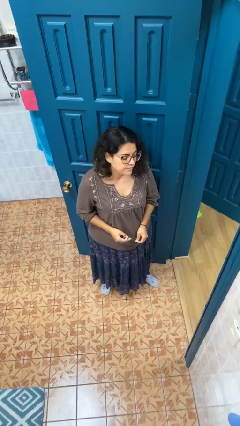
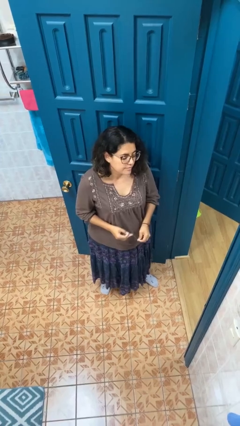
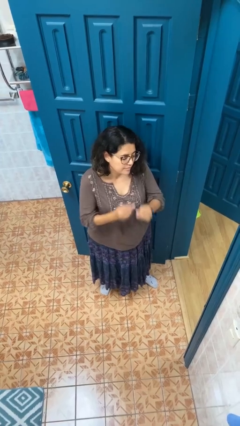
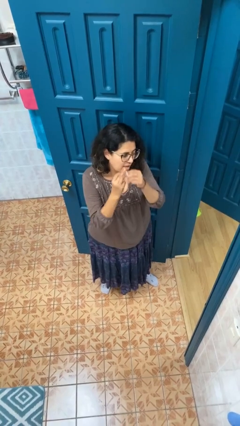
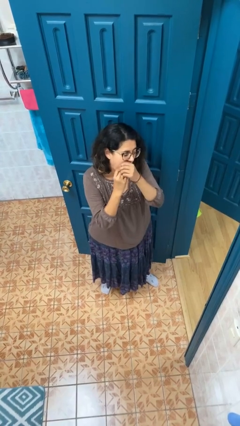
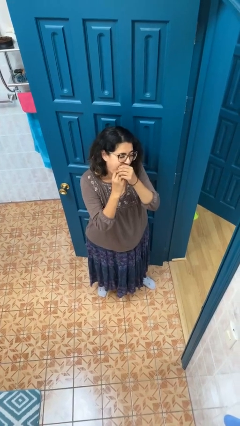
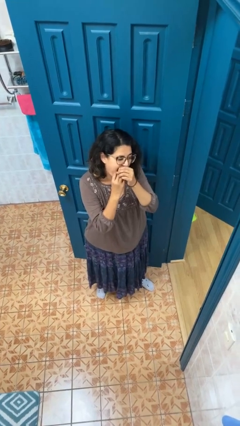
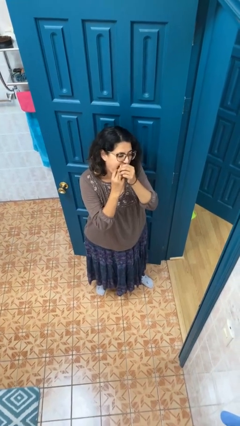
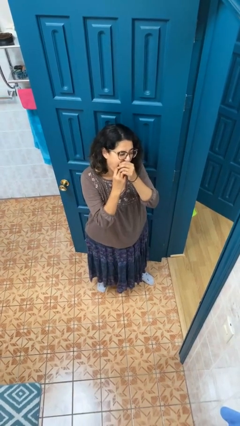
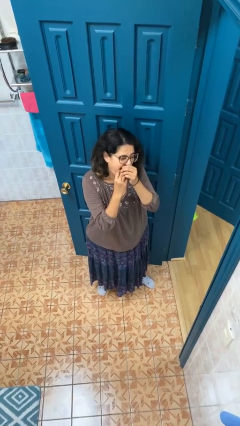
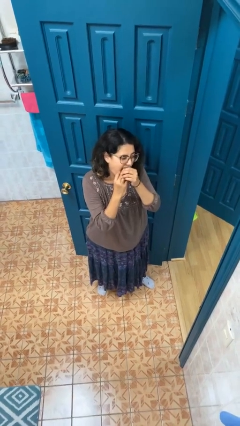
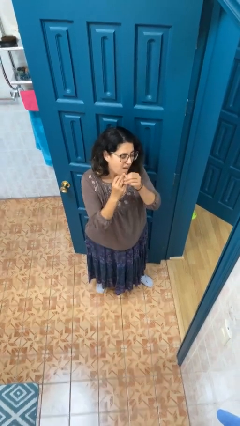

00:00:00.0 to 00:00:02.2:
person flosses

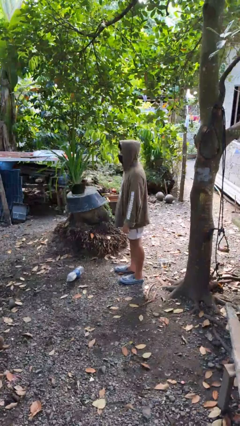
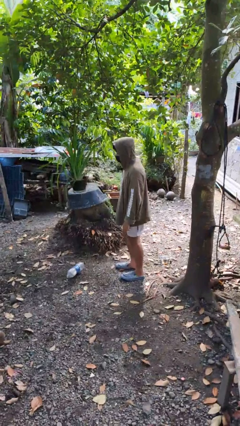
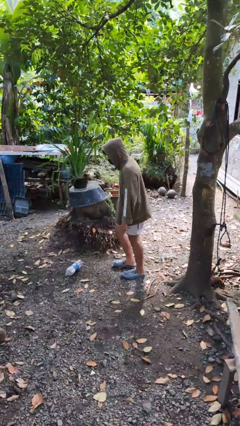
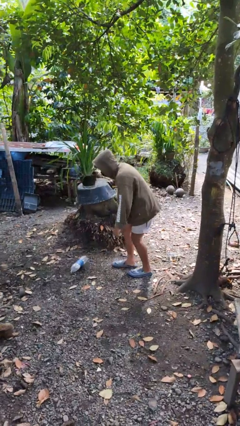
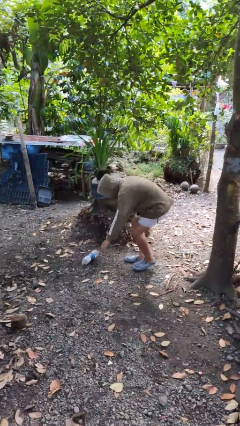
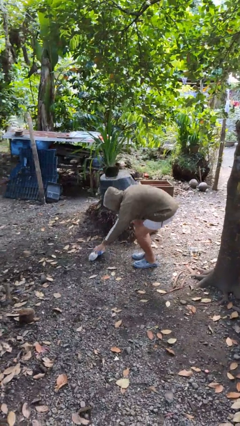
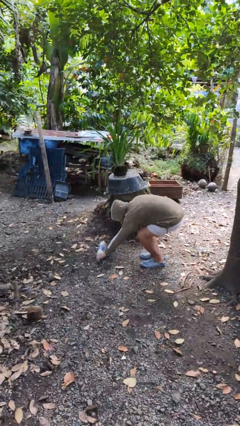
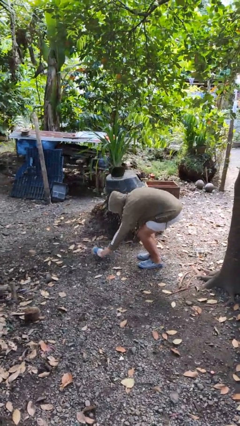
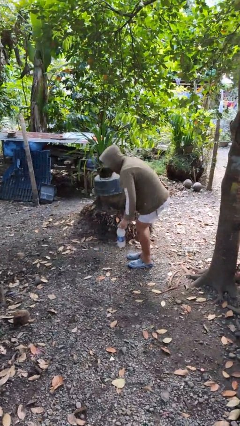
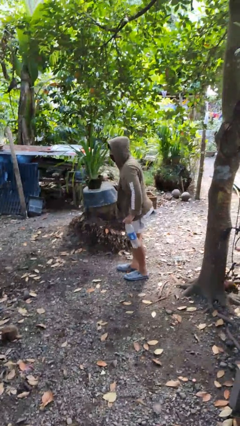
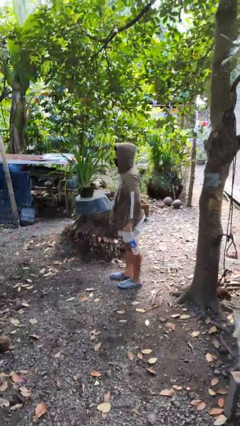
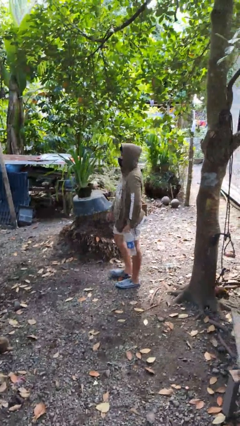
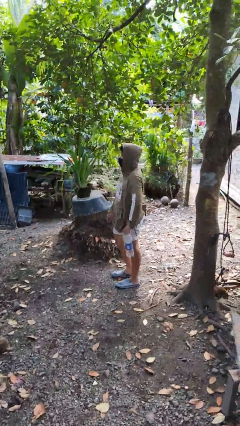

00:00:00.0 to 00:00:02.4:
person picks up object from floor

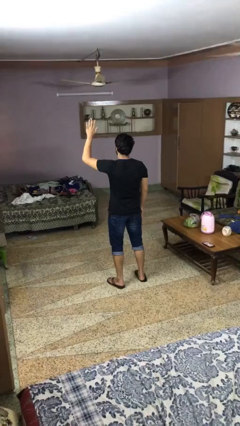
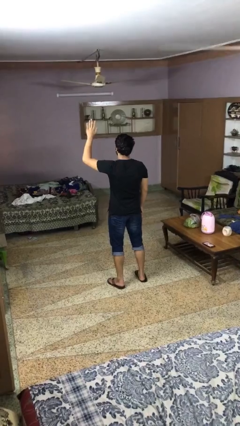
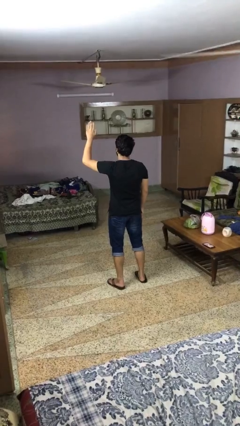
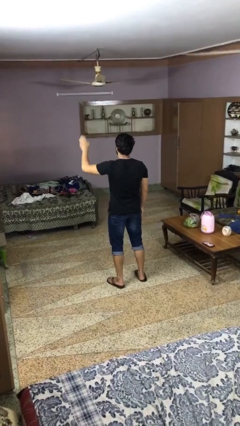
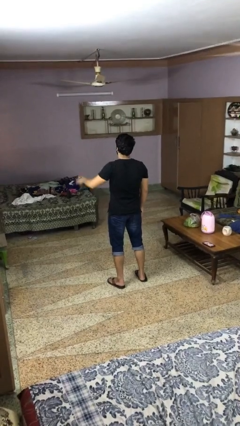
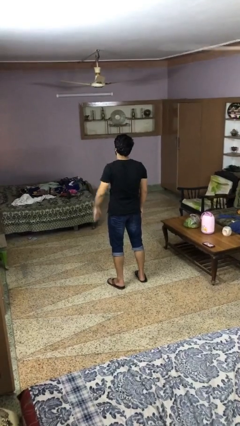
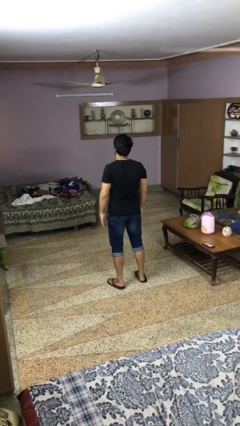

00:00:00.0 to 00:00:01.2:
person gestures lower hand

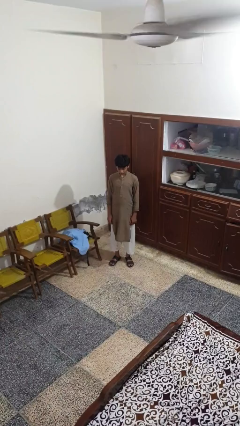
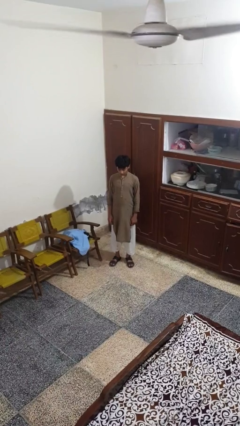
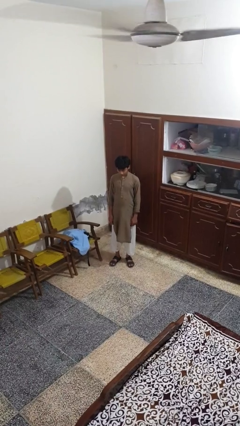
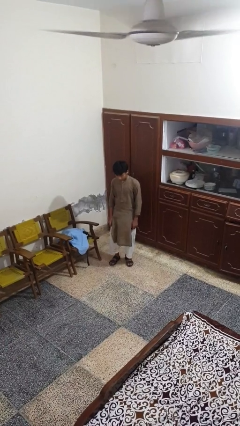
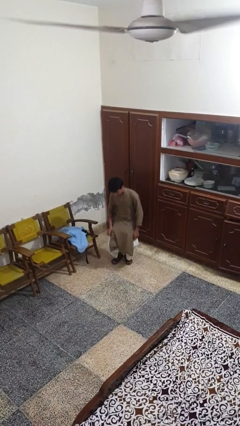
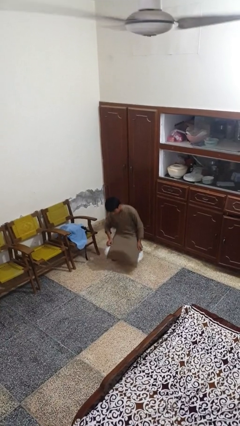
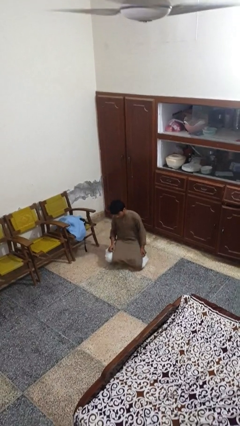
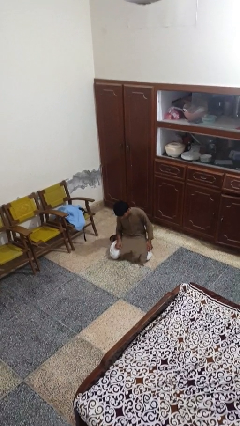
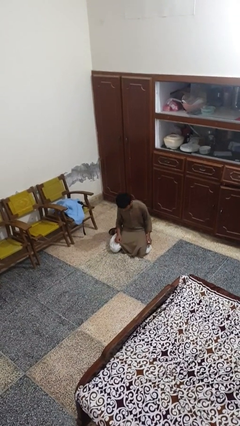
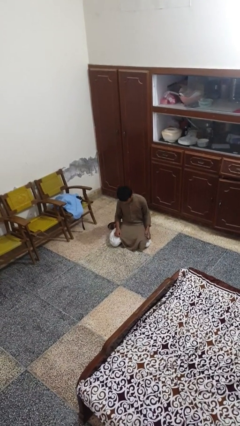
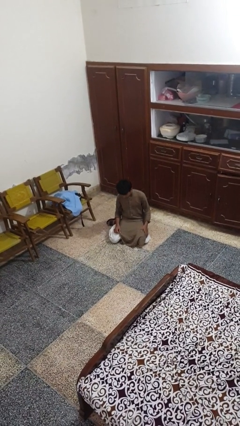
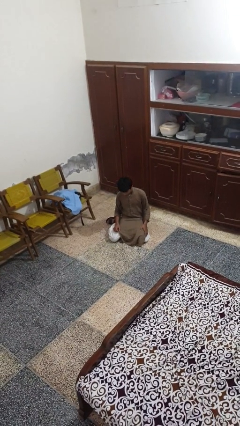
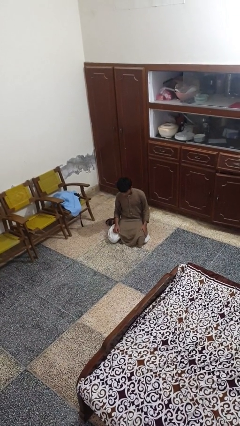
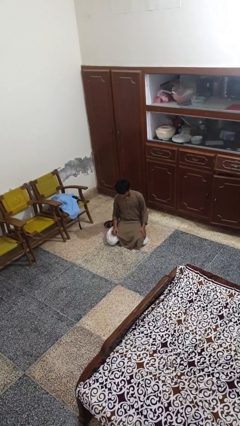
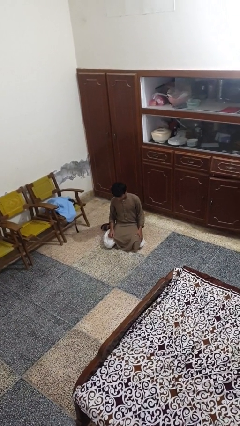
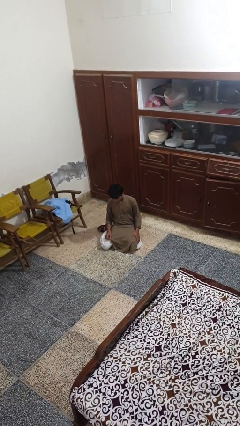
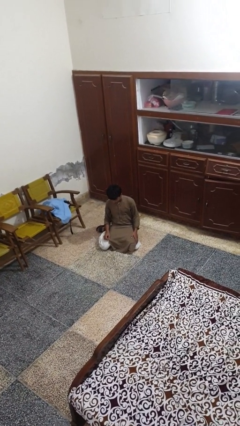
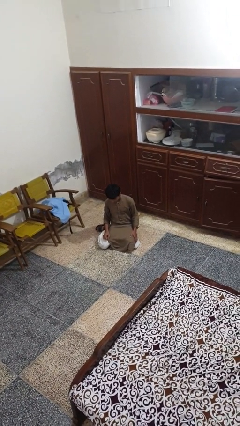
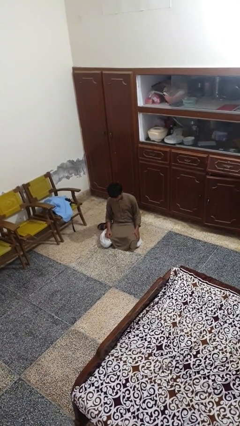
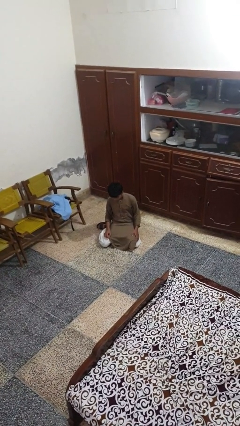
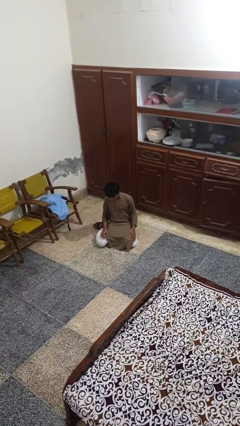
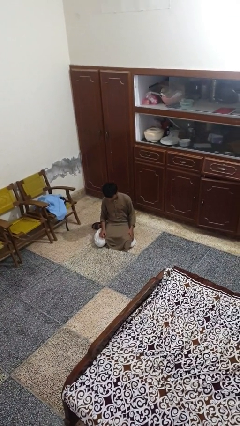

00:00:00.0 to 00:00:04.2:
person falls while standing

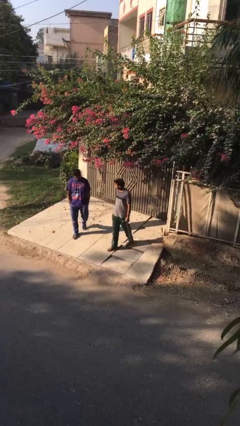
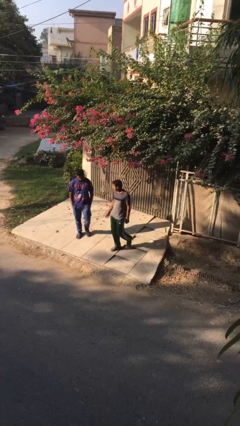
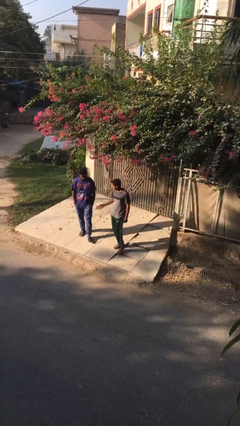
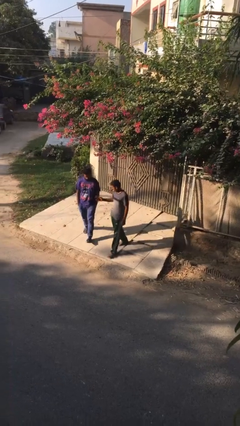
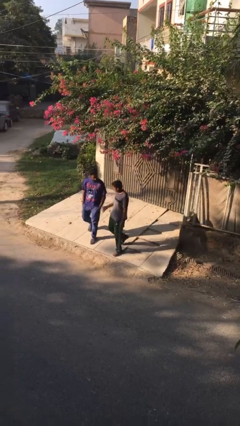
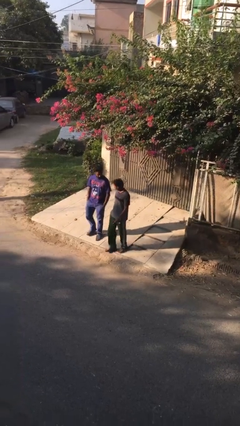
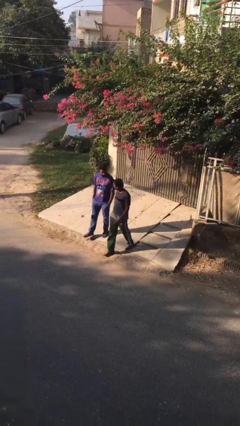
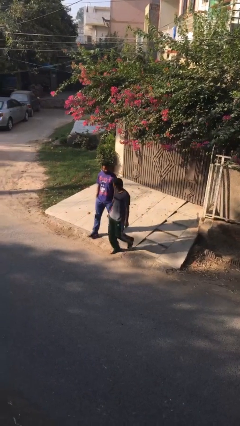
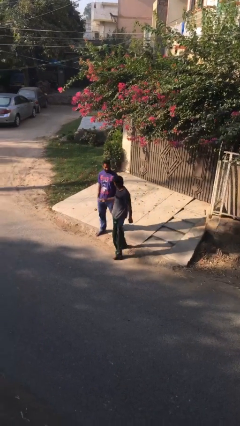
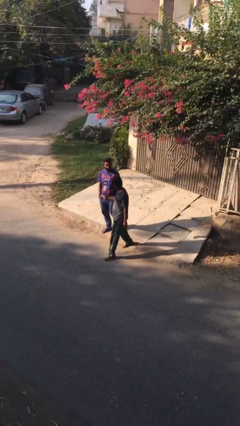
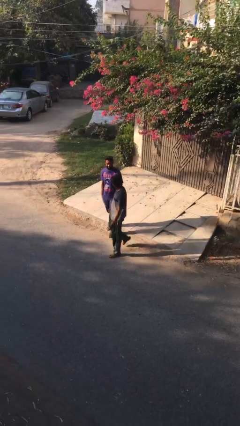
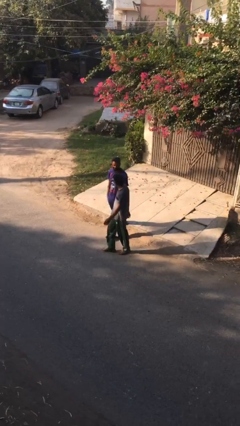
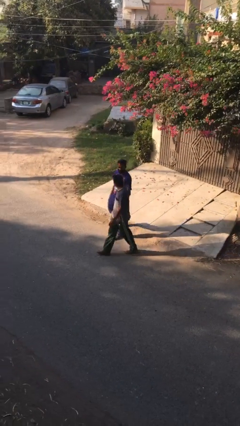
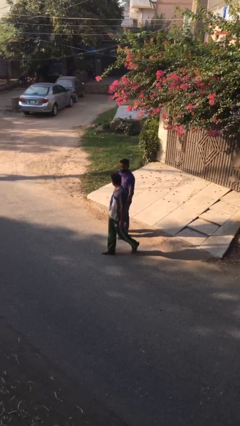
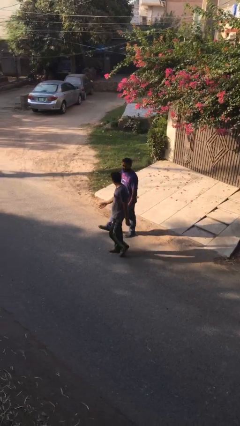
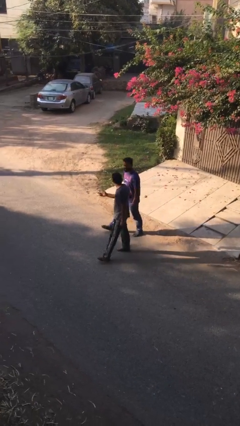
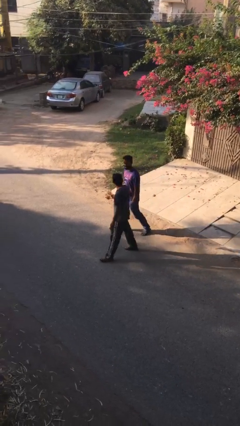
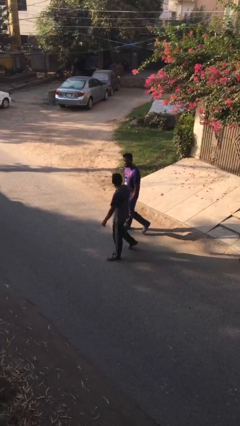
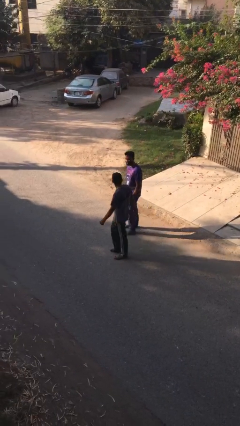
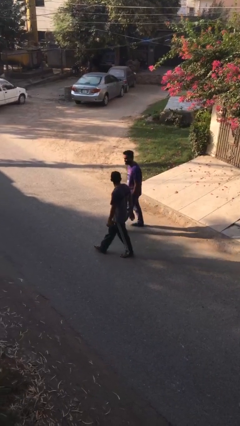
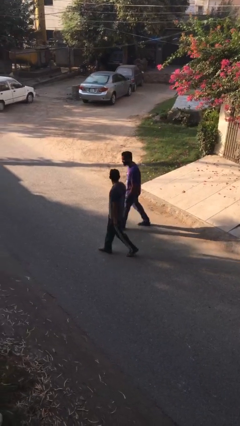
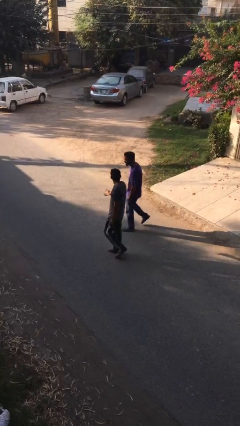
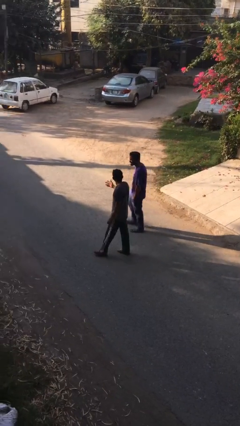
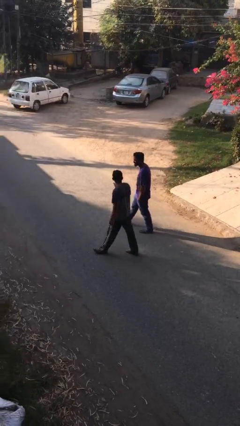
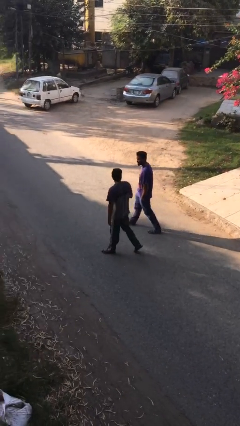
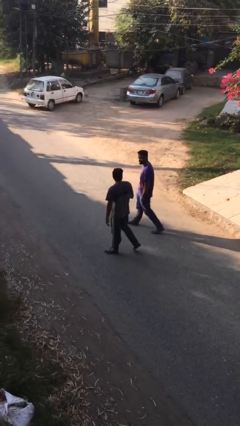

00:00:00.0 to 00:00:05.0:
person talks to person

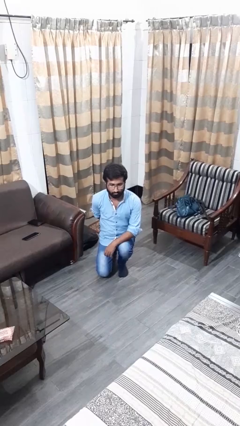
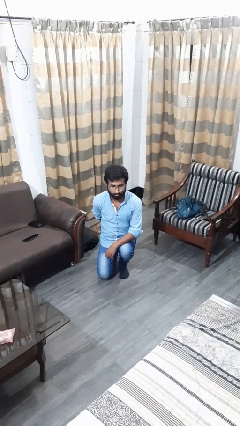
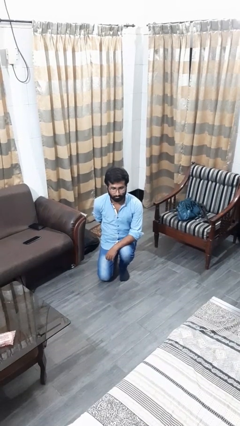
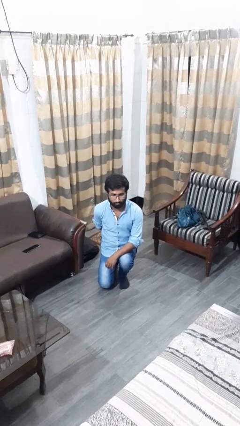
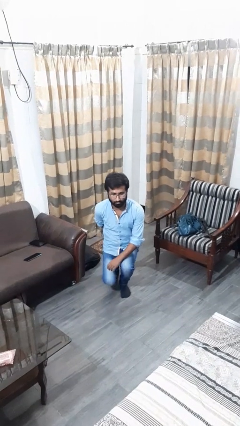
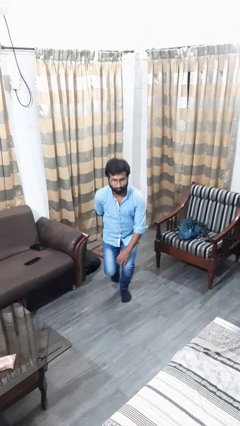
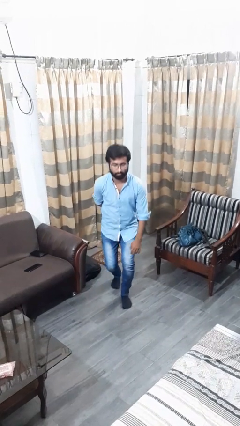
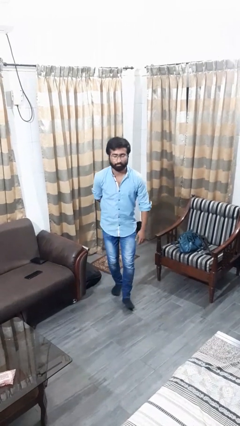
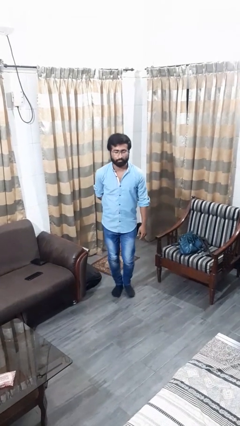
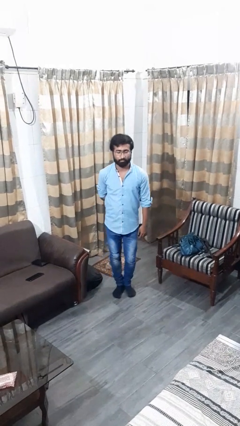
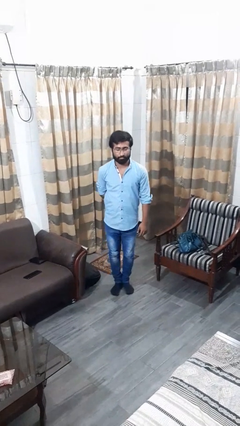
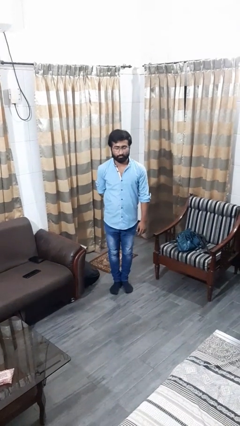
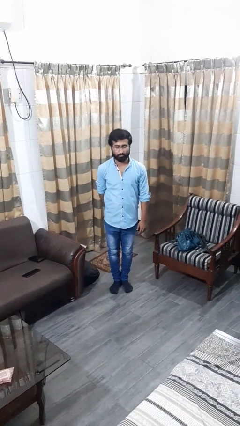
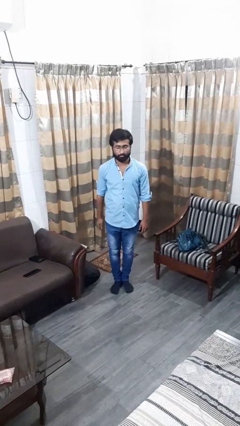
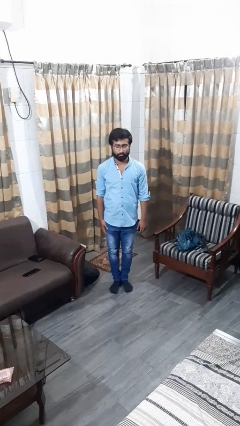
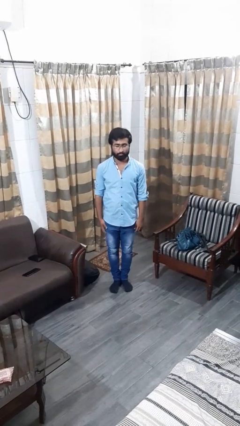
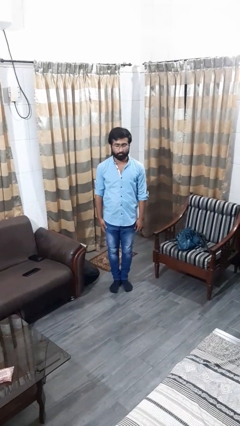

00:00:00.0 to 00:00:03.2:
person stands up from floor
